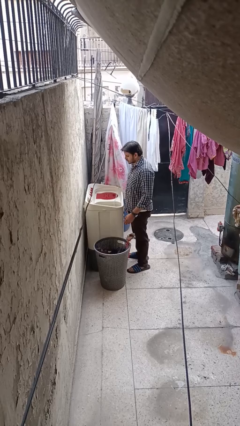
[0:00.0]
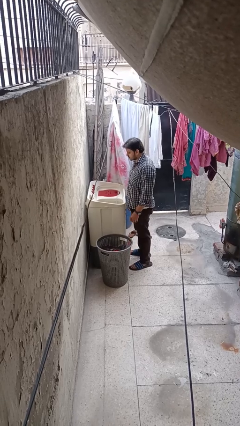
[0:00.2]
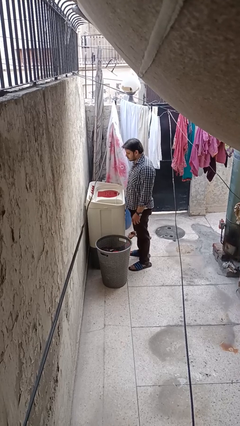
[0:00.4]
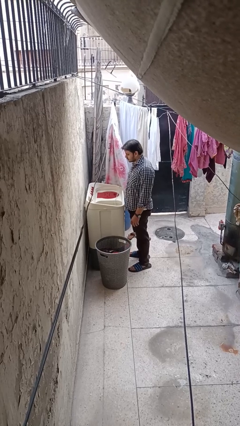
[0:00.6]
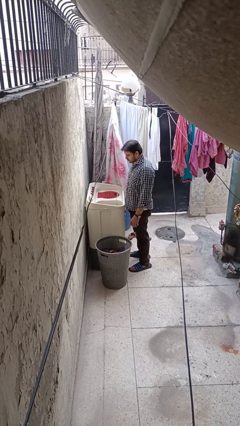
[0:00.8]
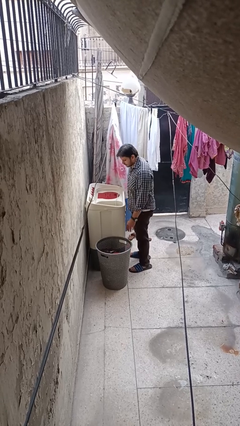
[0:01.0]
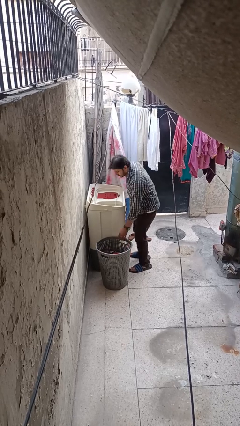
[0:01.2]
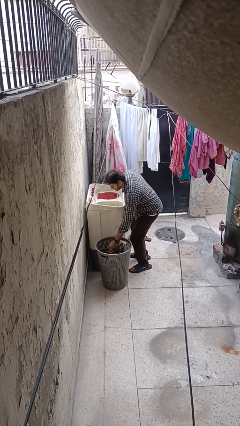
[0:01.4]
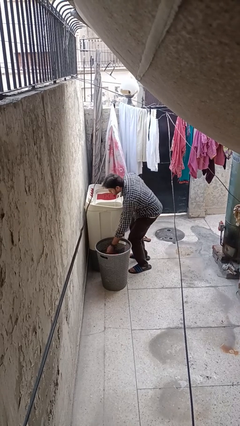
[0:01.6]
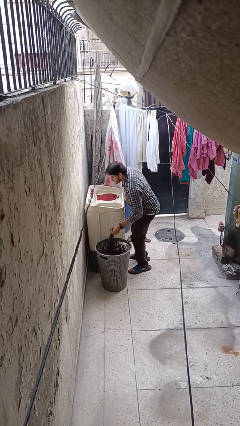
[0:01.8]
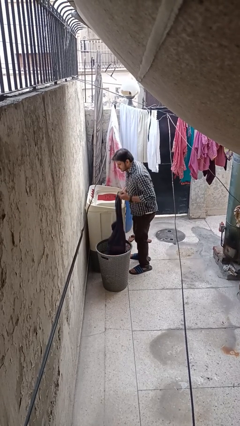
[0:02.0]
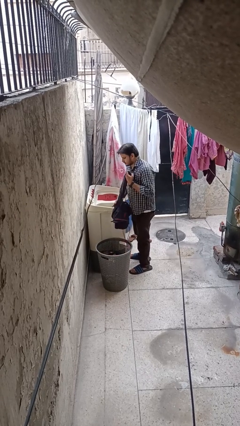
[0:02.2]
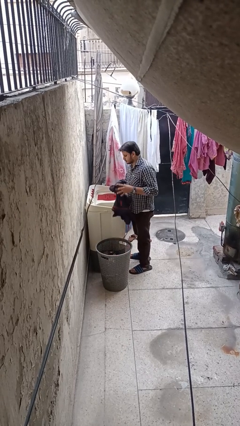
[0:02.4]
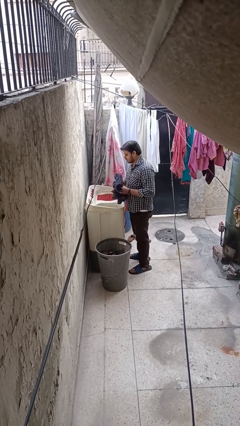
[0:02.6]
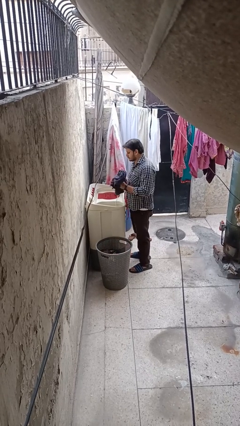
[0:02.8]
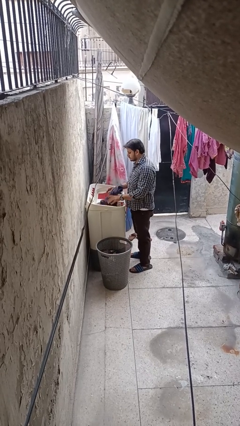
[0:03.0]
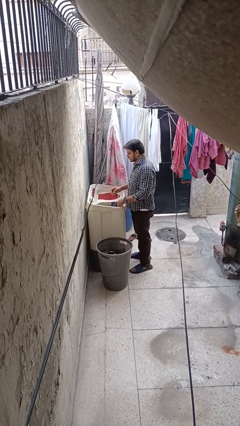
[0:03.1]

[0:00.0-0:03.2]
person unloads clotheswasher

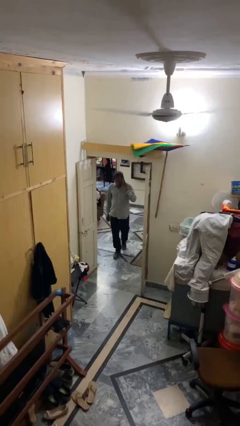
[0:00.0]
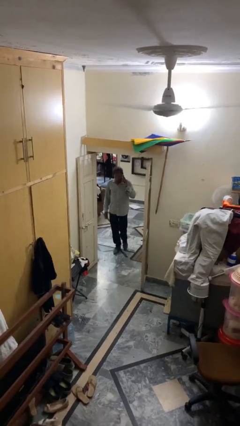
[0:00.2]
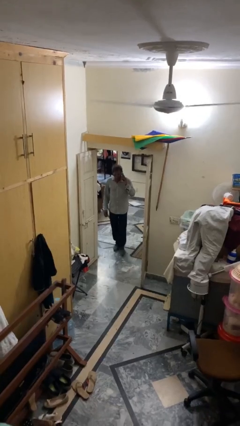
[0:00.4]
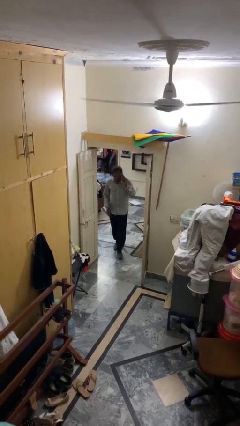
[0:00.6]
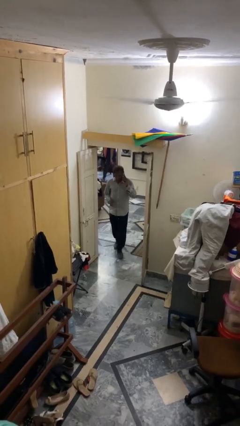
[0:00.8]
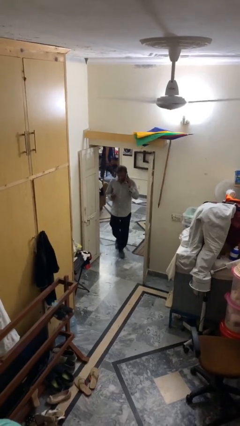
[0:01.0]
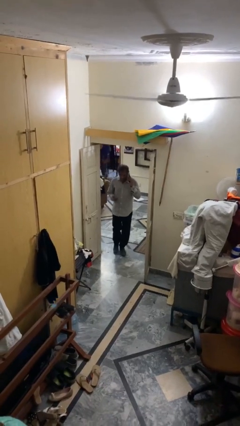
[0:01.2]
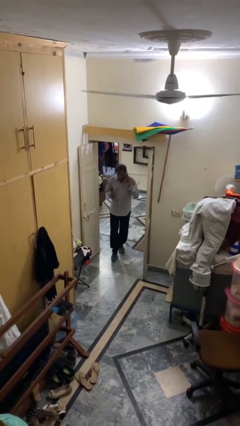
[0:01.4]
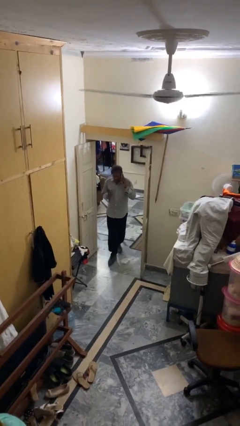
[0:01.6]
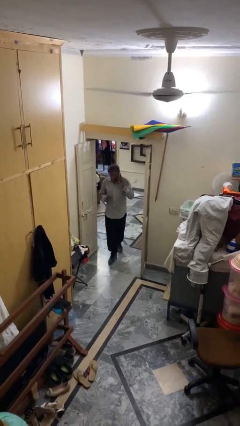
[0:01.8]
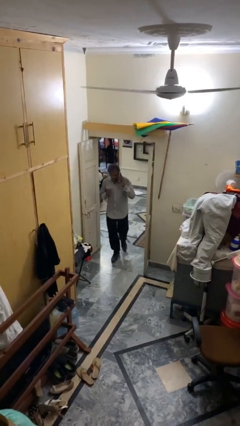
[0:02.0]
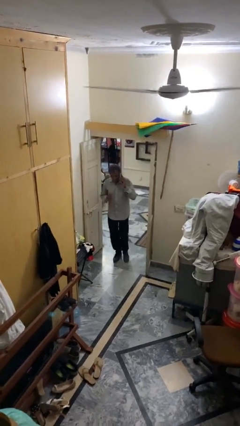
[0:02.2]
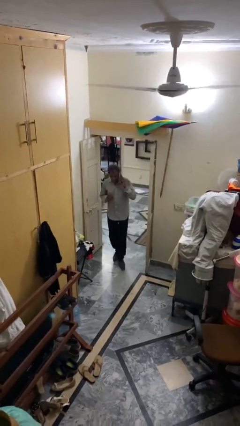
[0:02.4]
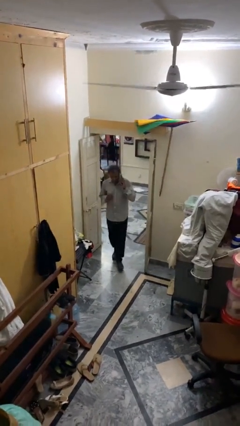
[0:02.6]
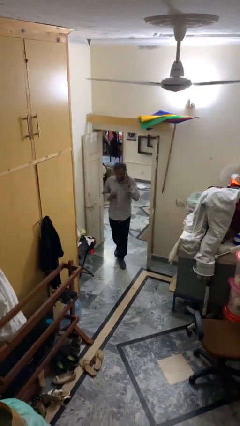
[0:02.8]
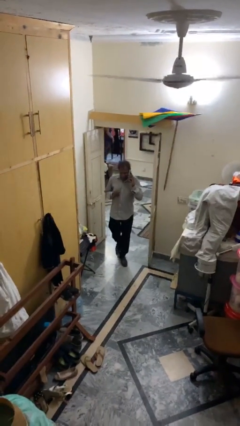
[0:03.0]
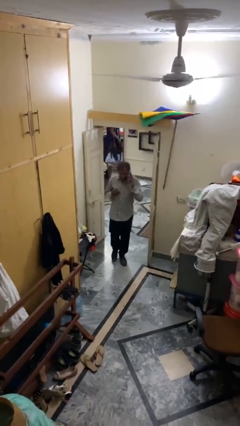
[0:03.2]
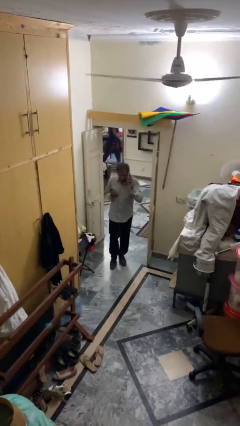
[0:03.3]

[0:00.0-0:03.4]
person enters scene through structure

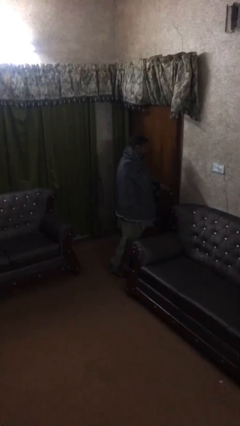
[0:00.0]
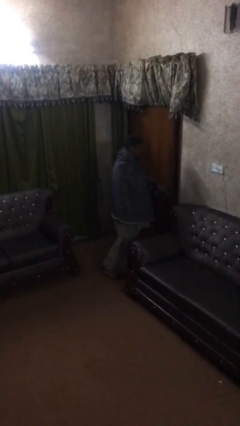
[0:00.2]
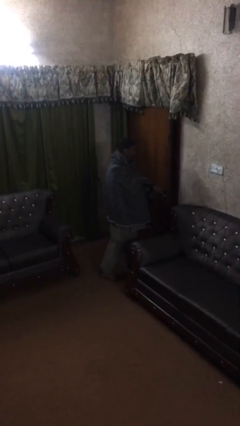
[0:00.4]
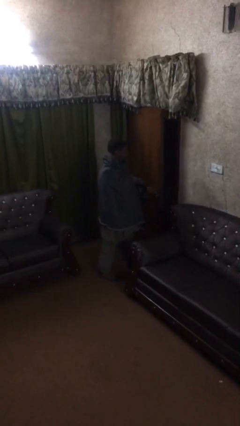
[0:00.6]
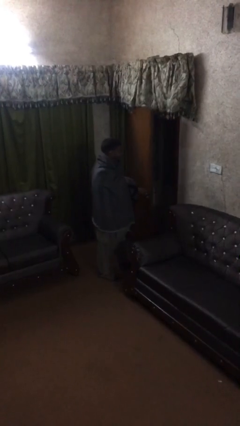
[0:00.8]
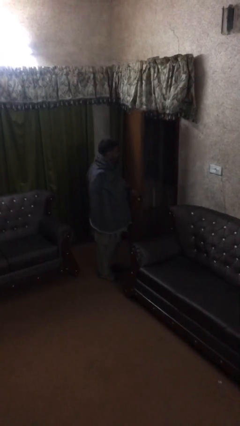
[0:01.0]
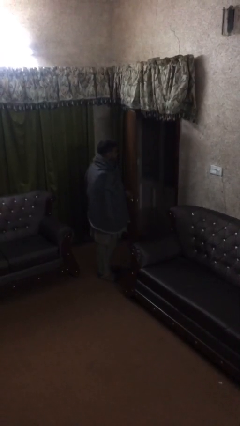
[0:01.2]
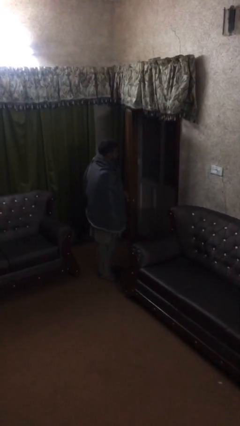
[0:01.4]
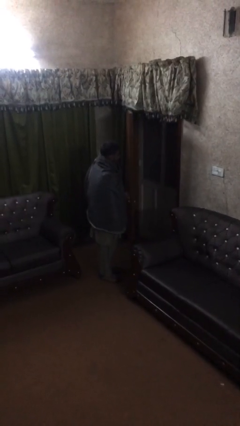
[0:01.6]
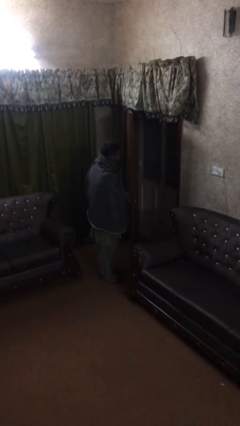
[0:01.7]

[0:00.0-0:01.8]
person opens facility door

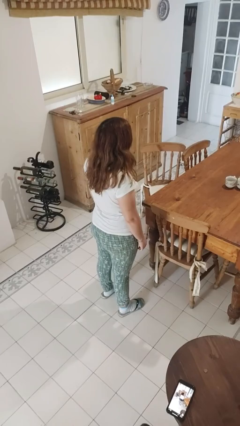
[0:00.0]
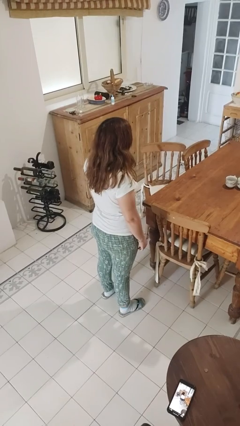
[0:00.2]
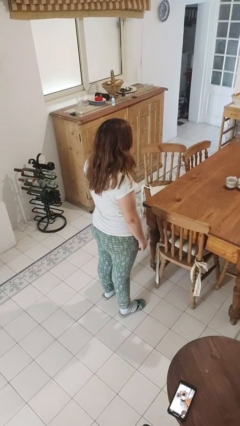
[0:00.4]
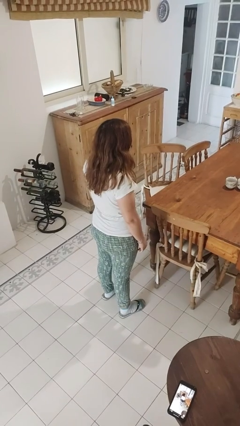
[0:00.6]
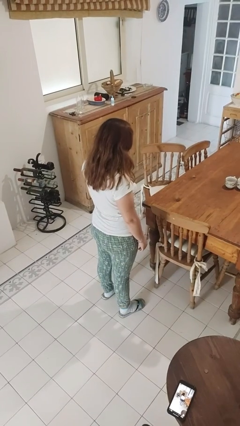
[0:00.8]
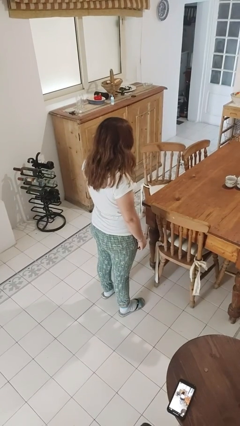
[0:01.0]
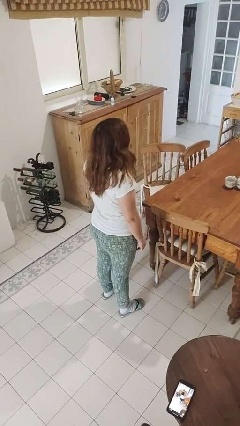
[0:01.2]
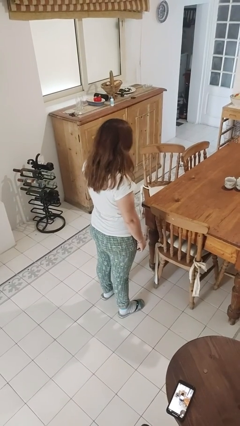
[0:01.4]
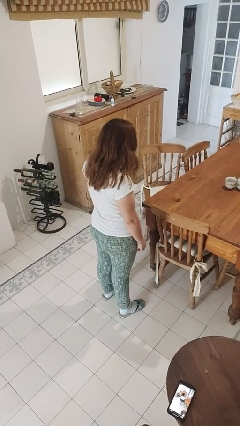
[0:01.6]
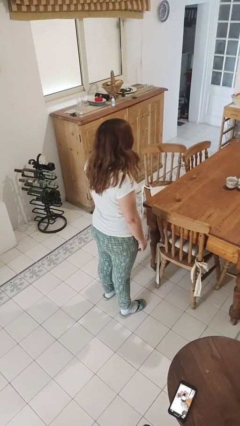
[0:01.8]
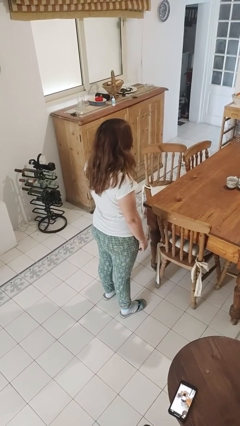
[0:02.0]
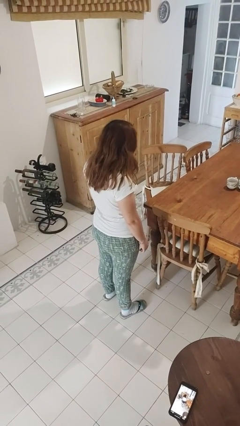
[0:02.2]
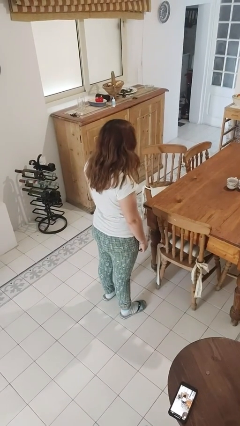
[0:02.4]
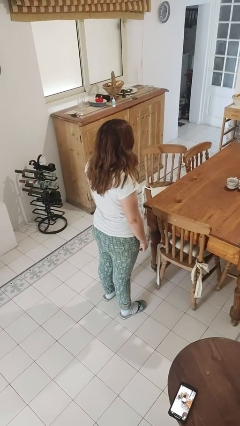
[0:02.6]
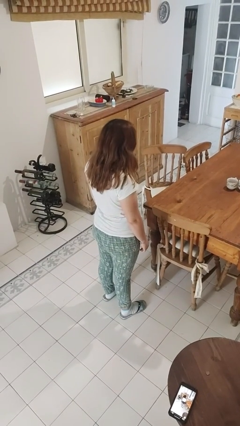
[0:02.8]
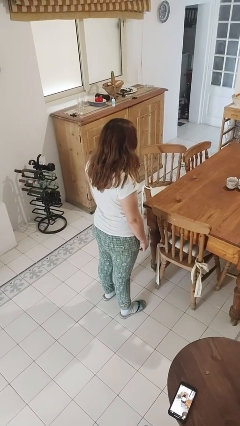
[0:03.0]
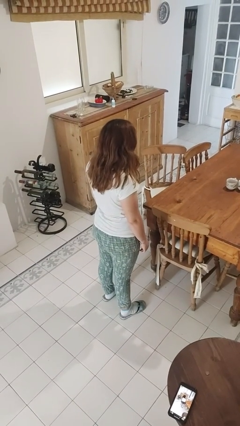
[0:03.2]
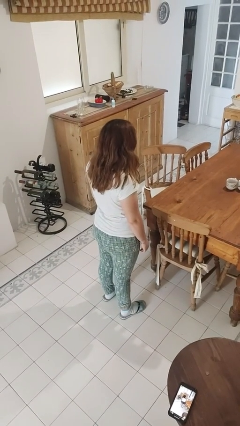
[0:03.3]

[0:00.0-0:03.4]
person nods head

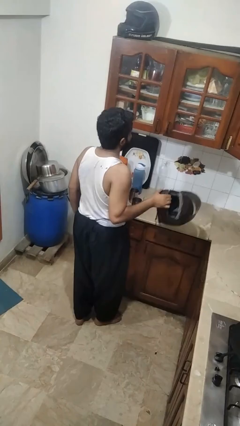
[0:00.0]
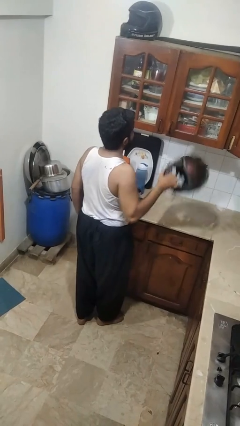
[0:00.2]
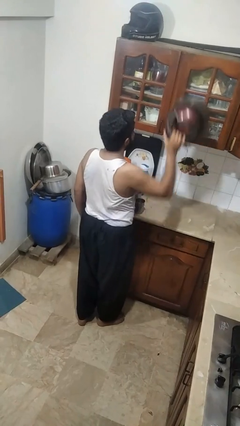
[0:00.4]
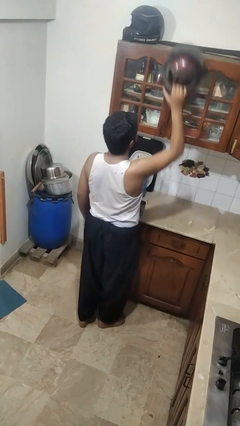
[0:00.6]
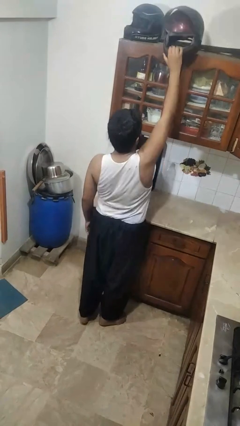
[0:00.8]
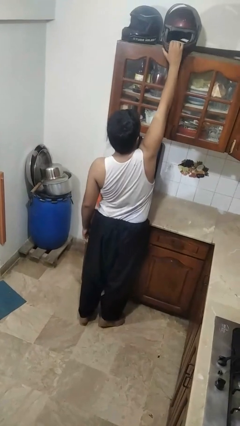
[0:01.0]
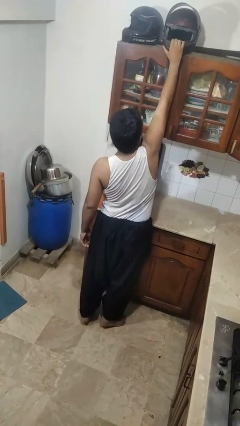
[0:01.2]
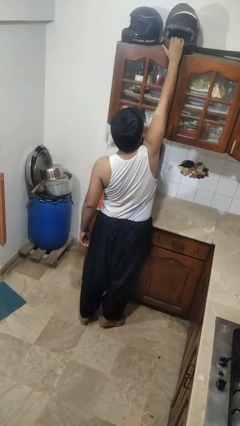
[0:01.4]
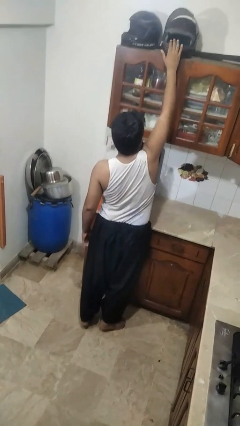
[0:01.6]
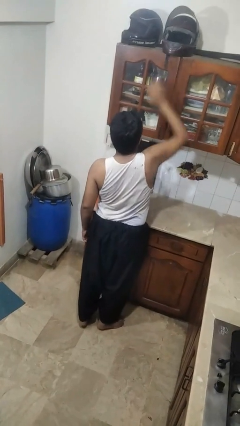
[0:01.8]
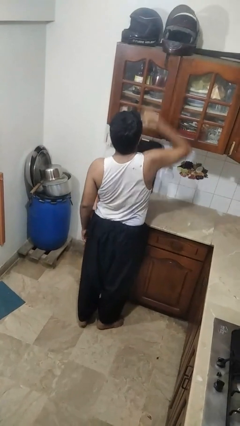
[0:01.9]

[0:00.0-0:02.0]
person puts down object on shelf

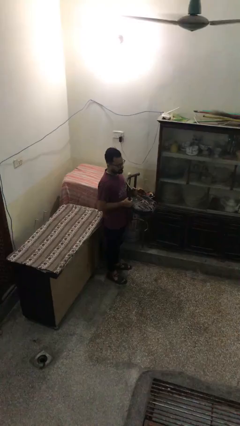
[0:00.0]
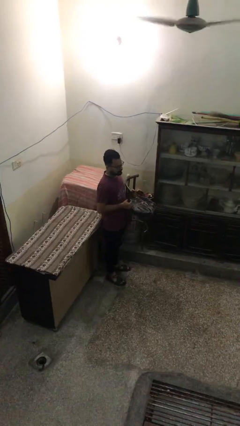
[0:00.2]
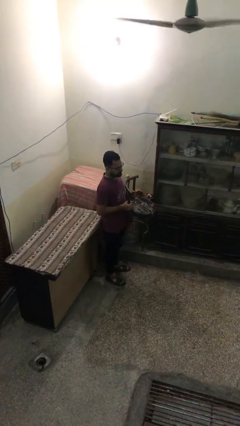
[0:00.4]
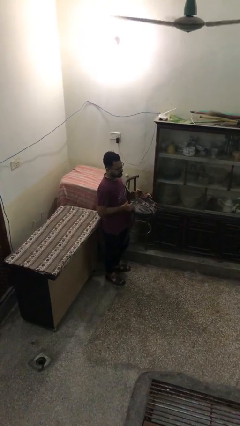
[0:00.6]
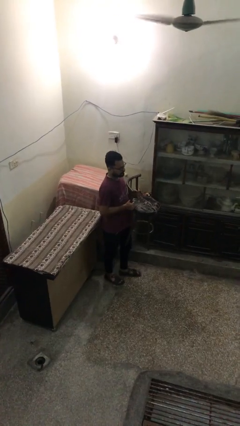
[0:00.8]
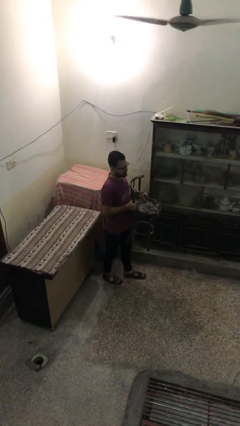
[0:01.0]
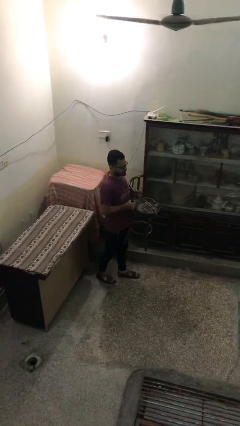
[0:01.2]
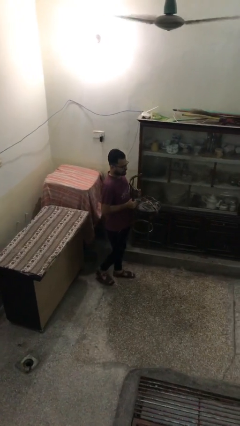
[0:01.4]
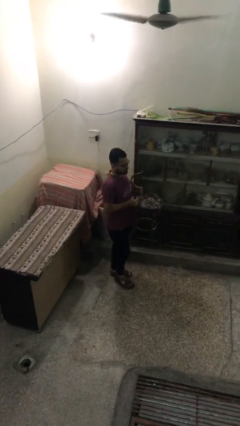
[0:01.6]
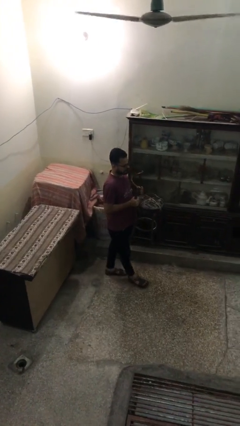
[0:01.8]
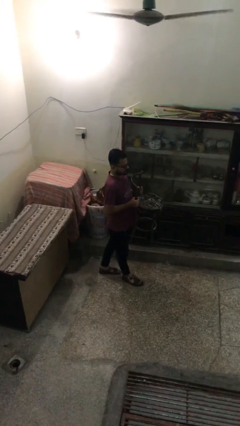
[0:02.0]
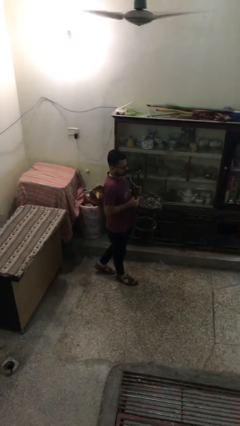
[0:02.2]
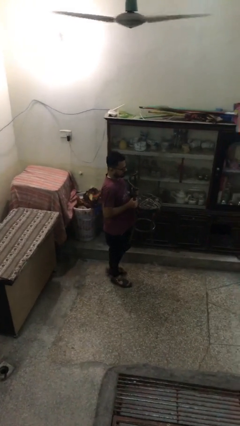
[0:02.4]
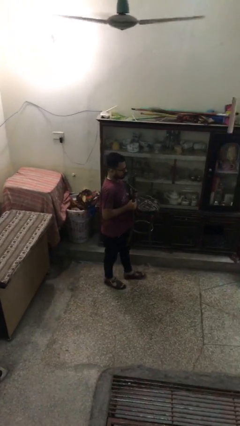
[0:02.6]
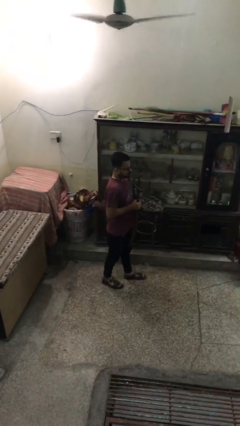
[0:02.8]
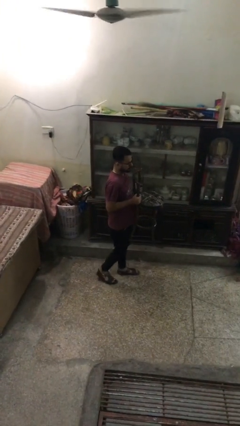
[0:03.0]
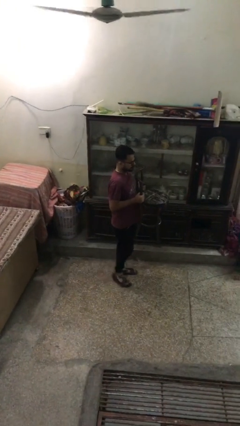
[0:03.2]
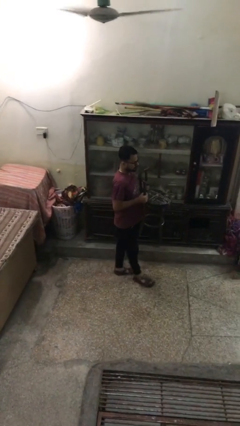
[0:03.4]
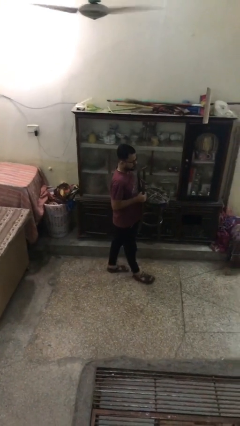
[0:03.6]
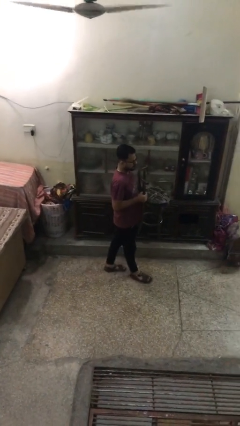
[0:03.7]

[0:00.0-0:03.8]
person carries heavy object
